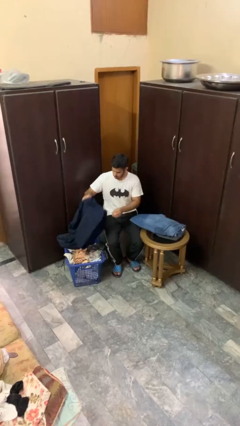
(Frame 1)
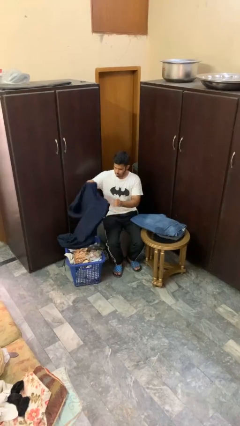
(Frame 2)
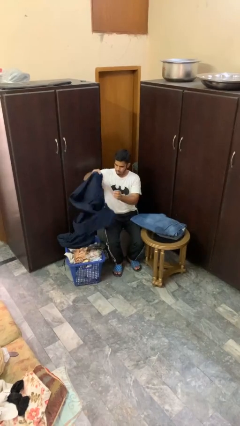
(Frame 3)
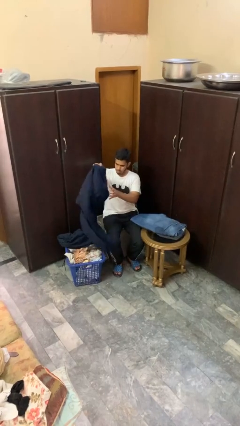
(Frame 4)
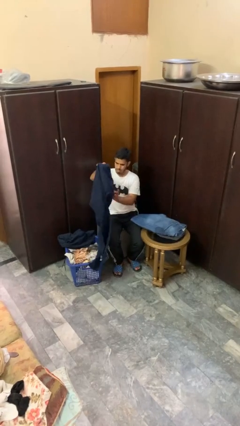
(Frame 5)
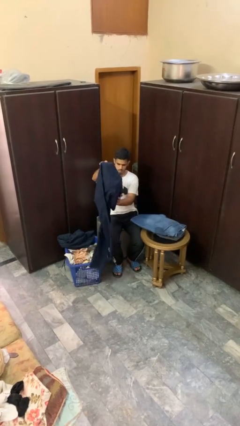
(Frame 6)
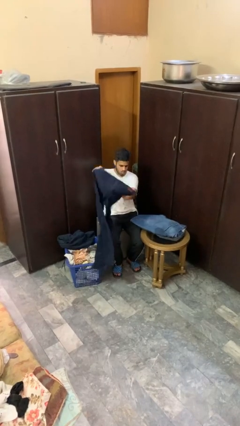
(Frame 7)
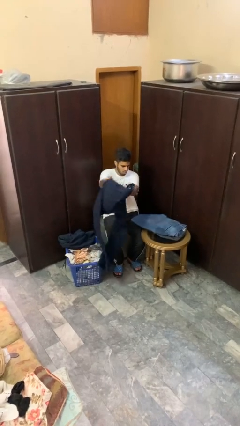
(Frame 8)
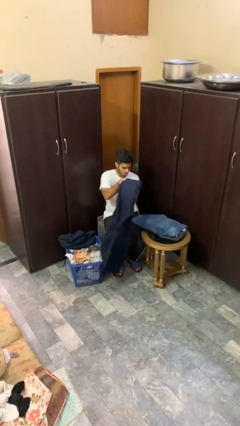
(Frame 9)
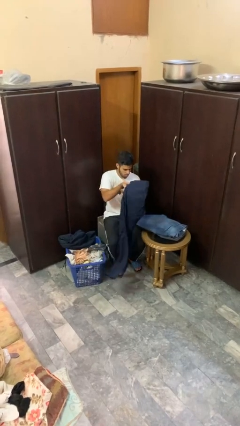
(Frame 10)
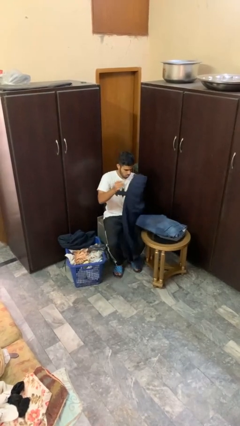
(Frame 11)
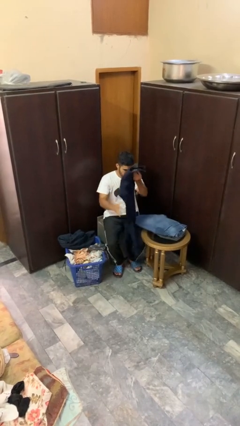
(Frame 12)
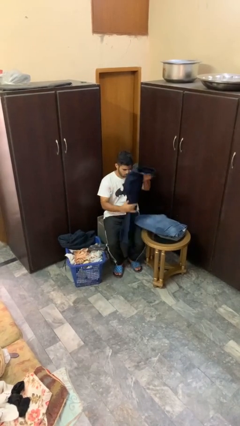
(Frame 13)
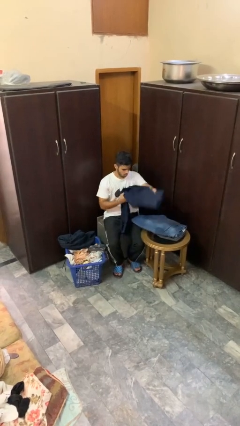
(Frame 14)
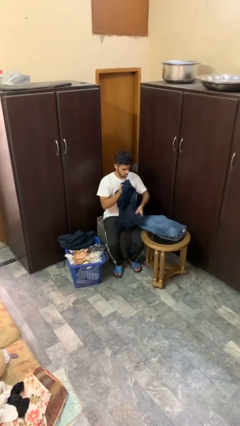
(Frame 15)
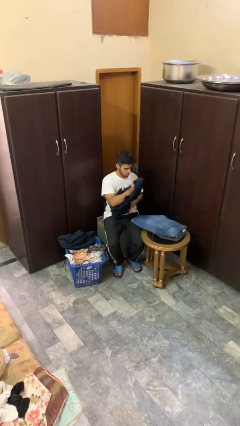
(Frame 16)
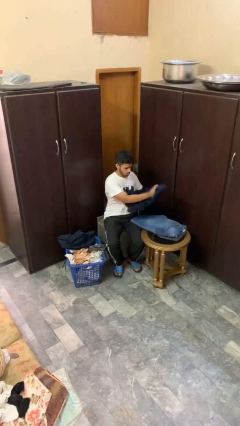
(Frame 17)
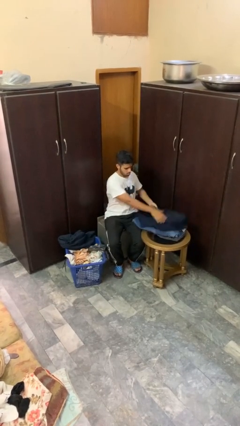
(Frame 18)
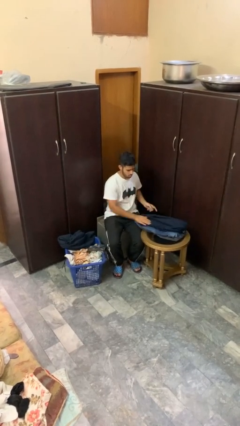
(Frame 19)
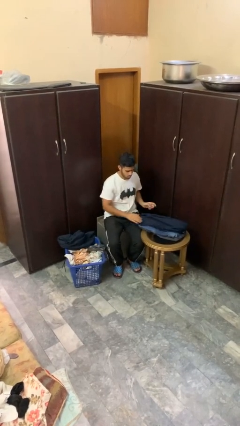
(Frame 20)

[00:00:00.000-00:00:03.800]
person folds pants

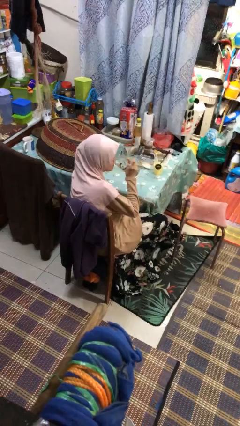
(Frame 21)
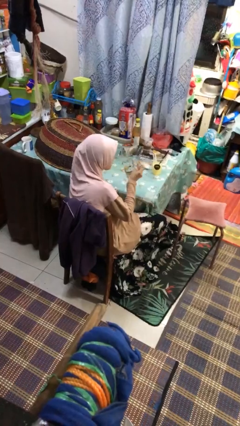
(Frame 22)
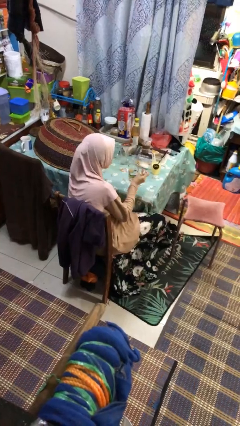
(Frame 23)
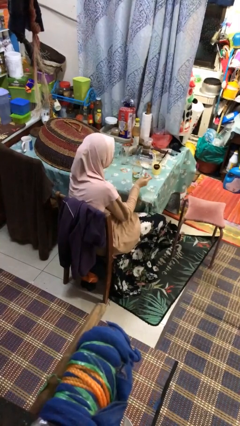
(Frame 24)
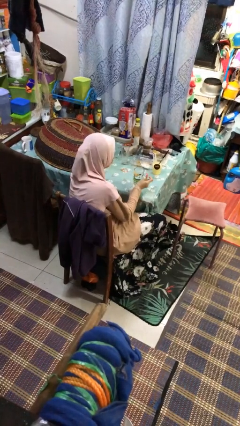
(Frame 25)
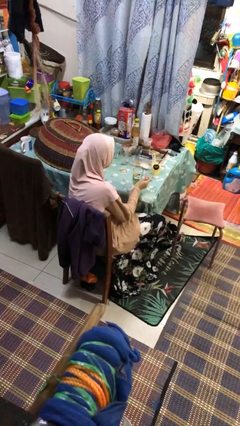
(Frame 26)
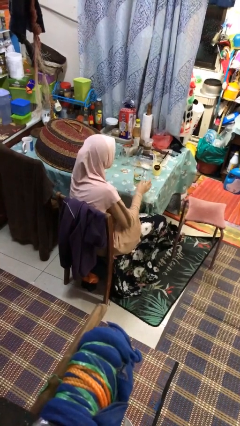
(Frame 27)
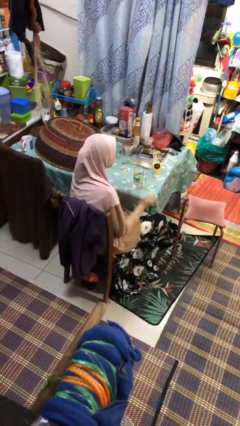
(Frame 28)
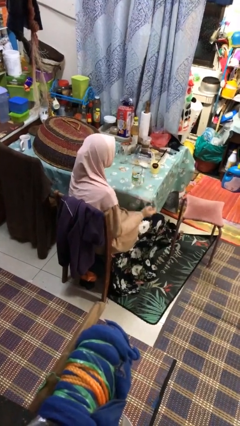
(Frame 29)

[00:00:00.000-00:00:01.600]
person puts down object on table

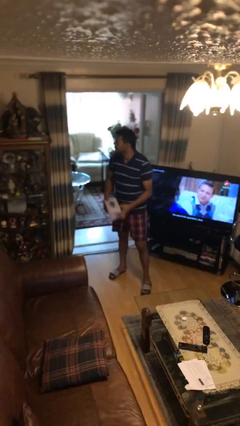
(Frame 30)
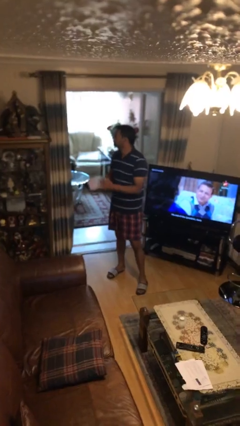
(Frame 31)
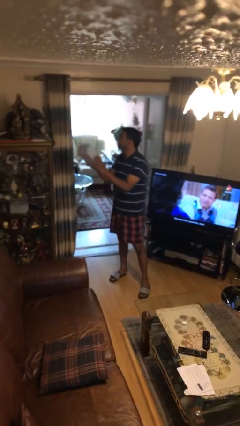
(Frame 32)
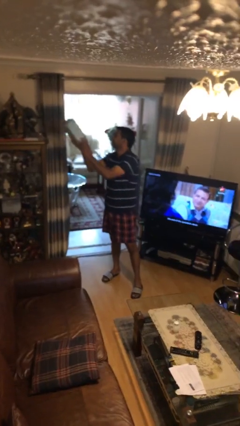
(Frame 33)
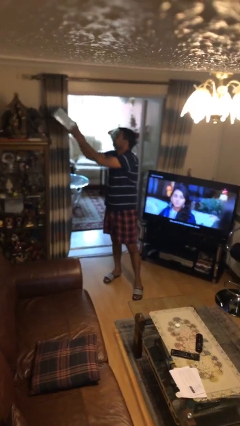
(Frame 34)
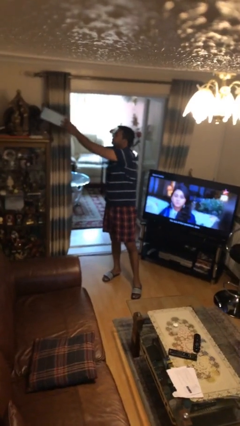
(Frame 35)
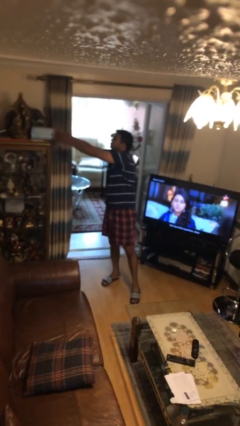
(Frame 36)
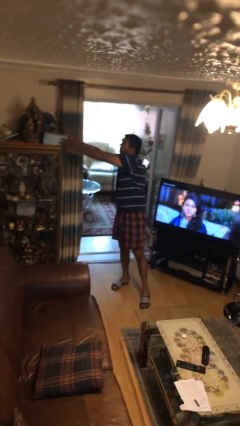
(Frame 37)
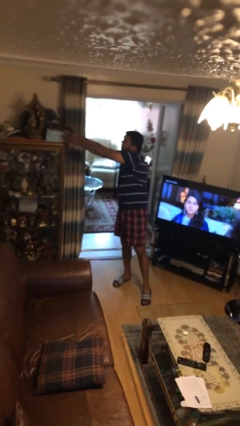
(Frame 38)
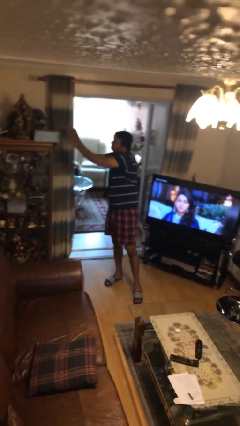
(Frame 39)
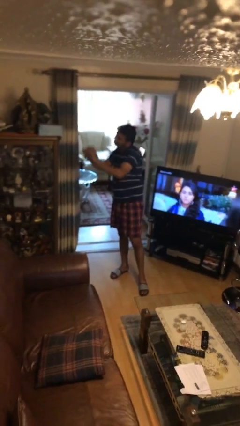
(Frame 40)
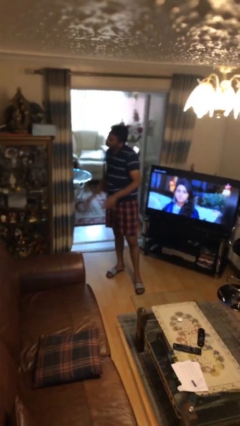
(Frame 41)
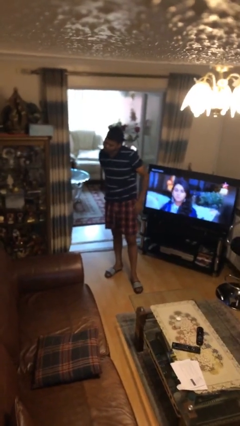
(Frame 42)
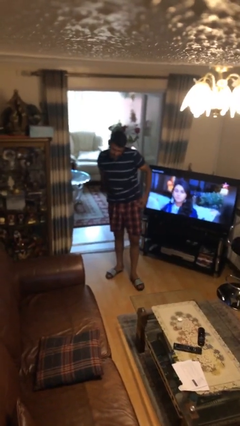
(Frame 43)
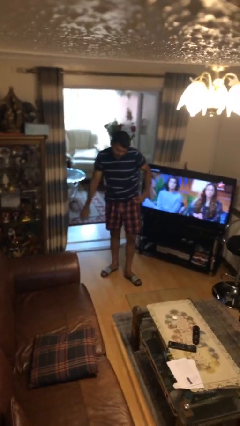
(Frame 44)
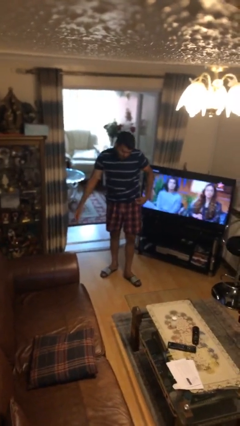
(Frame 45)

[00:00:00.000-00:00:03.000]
person puts down object on shelf

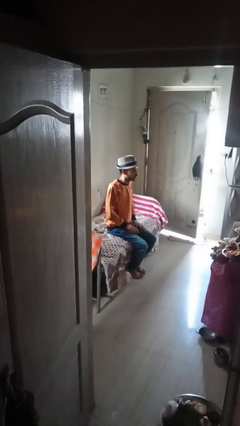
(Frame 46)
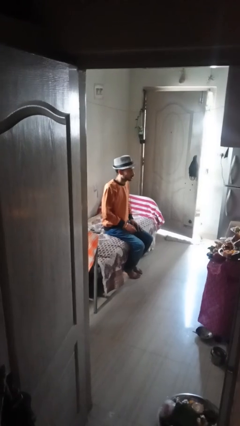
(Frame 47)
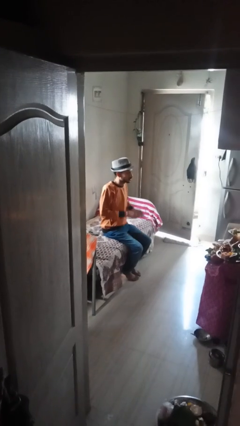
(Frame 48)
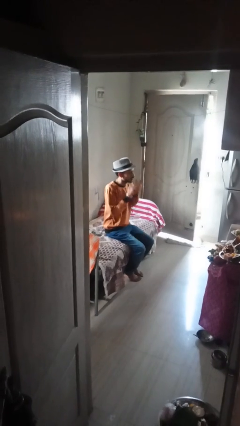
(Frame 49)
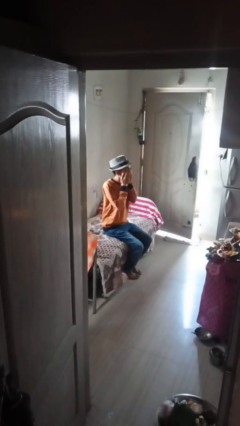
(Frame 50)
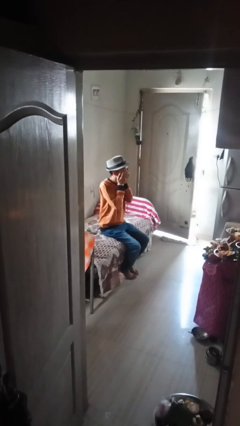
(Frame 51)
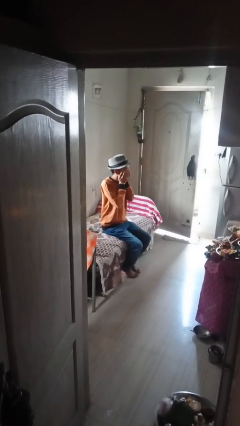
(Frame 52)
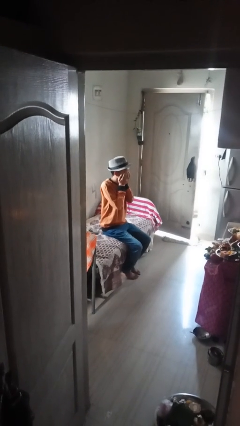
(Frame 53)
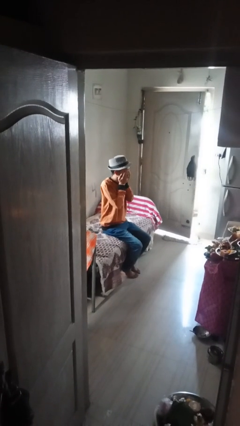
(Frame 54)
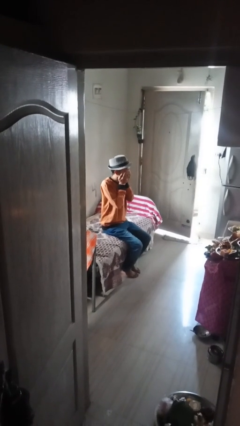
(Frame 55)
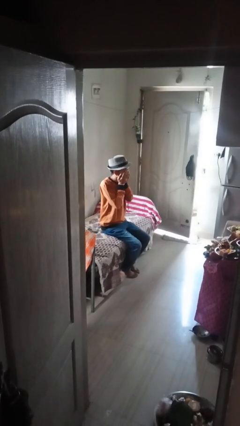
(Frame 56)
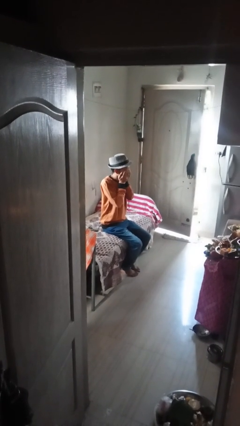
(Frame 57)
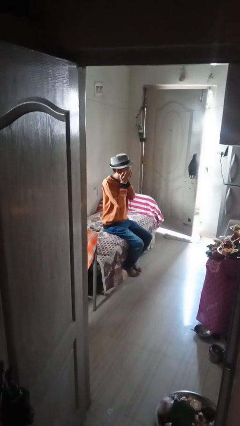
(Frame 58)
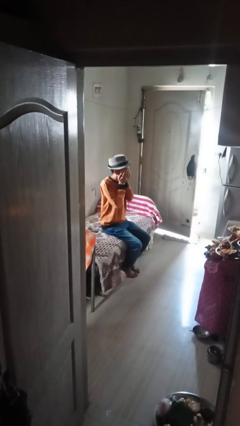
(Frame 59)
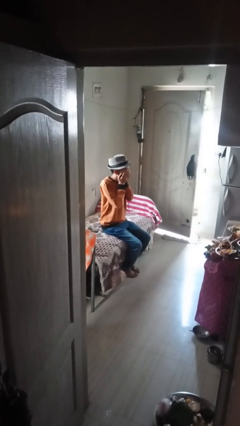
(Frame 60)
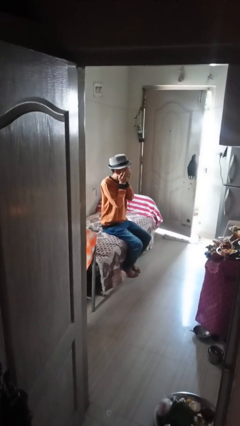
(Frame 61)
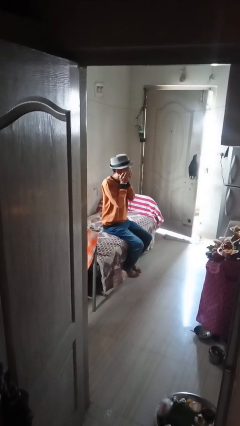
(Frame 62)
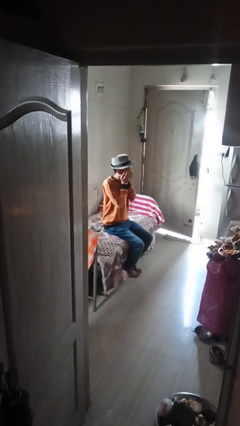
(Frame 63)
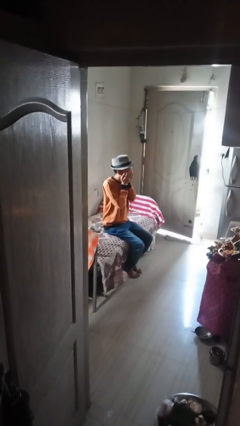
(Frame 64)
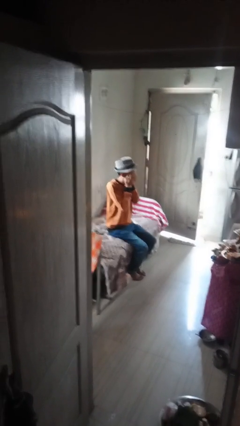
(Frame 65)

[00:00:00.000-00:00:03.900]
person covers face with hands

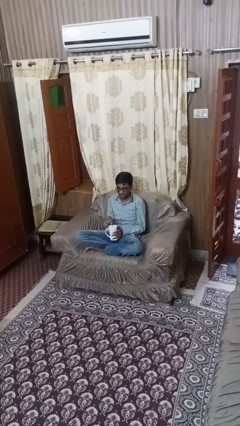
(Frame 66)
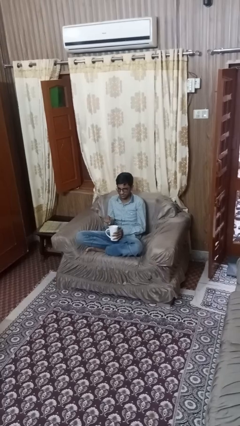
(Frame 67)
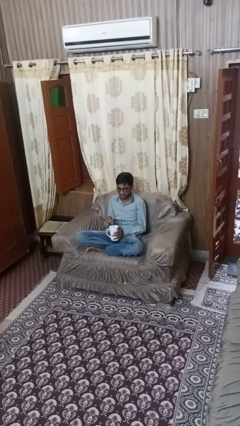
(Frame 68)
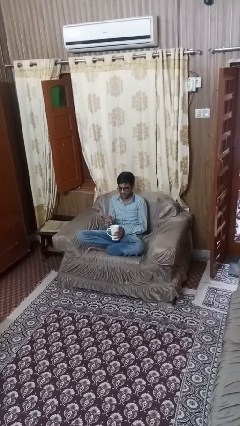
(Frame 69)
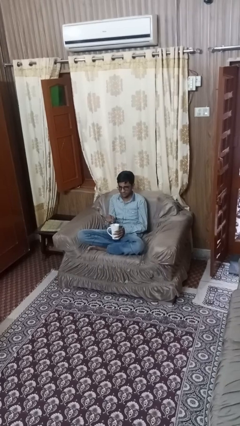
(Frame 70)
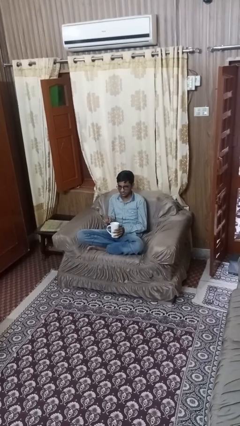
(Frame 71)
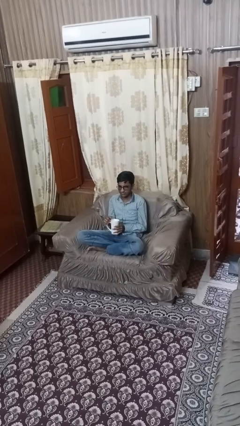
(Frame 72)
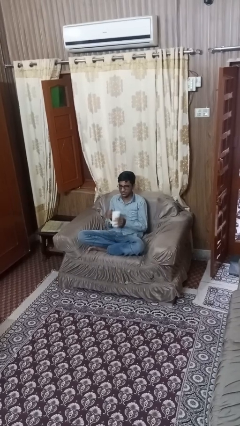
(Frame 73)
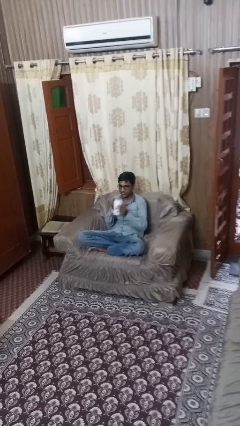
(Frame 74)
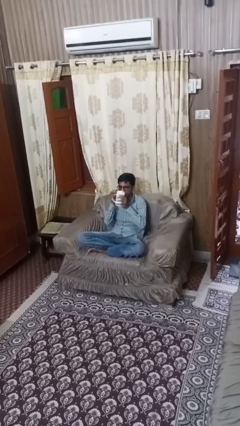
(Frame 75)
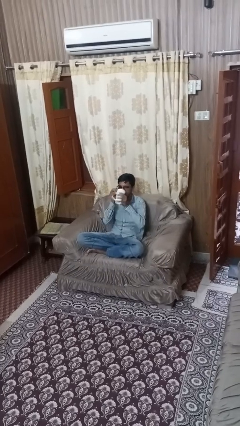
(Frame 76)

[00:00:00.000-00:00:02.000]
person stirs mug

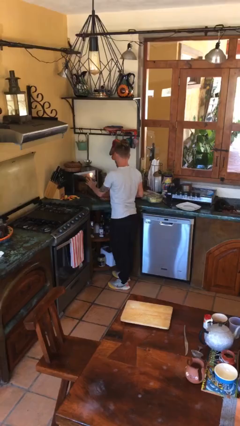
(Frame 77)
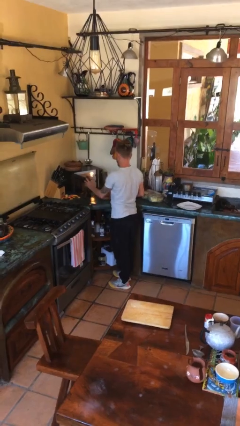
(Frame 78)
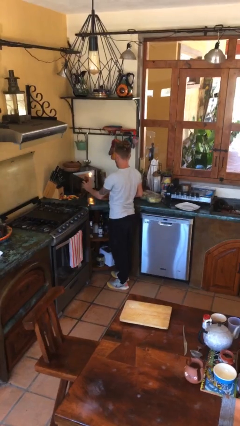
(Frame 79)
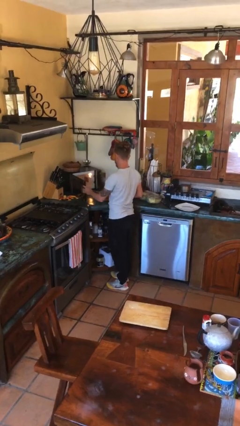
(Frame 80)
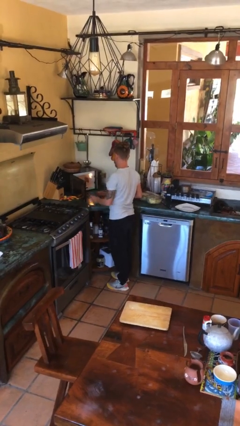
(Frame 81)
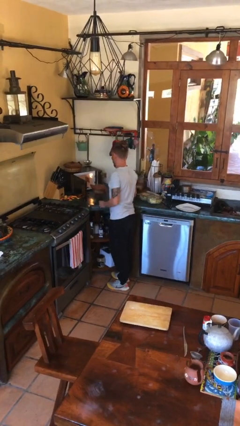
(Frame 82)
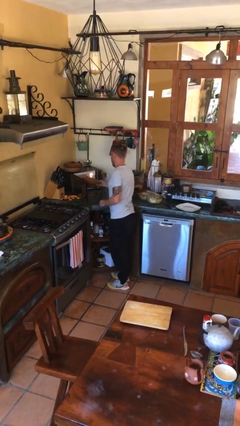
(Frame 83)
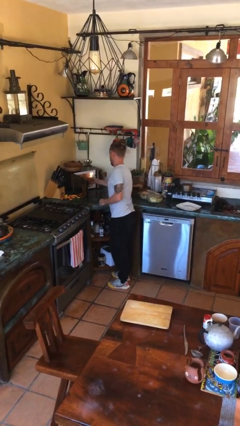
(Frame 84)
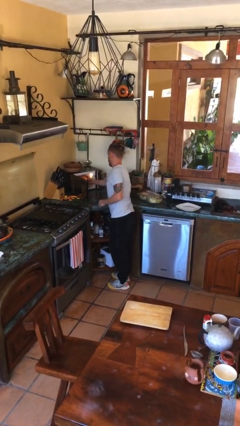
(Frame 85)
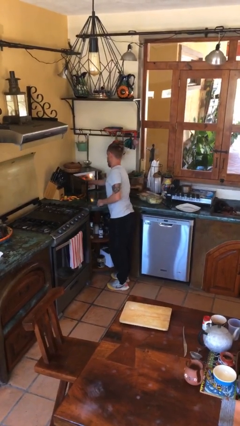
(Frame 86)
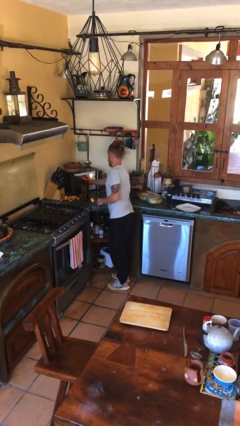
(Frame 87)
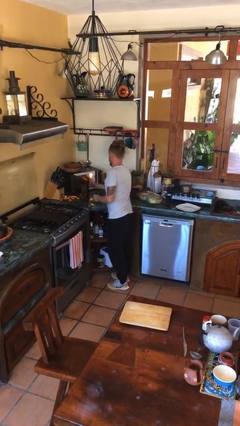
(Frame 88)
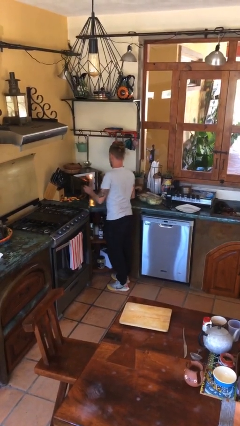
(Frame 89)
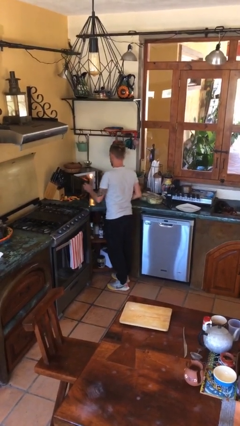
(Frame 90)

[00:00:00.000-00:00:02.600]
person puts object into microwave

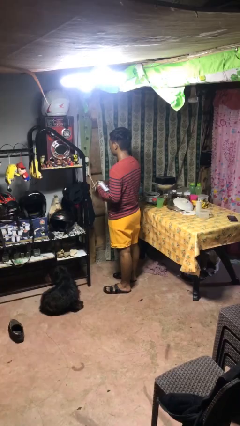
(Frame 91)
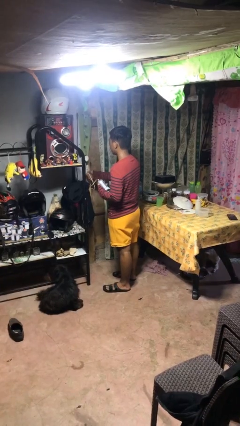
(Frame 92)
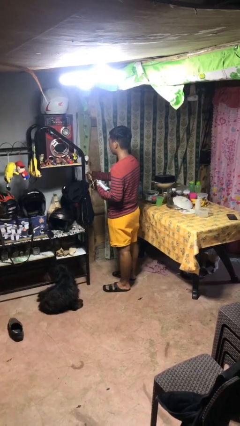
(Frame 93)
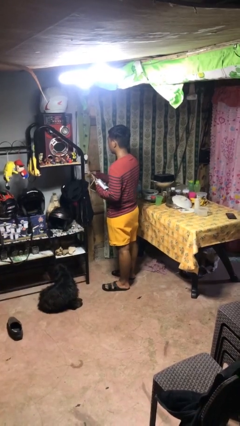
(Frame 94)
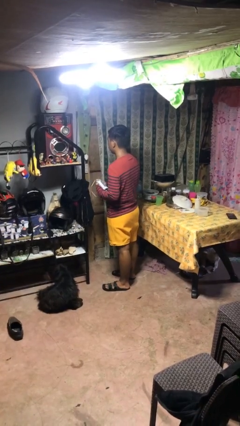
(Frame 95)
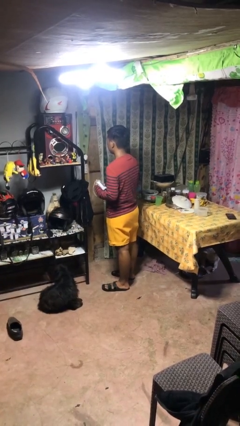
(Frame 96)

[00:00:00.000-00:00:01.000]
person unplugs from electrical socket
